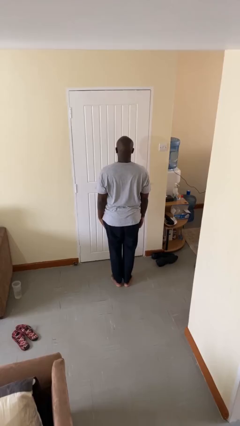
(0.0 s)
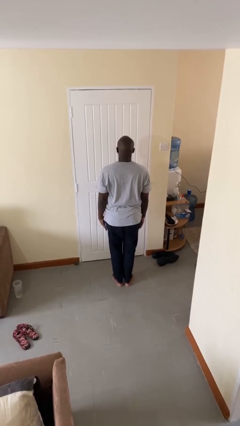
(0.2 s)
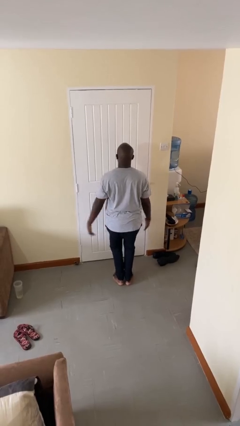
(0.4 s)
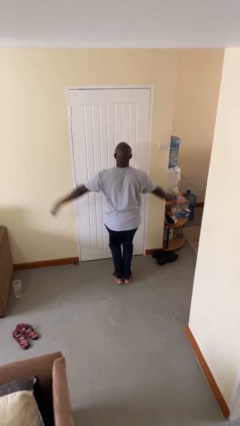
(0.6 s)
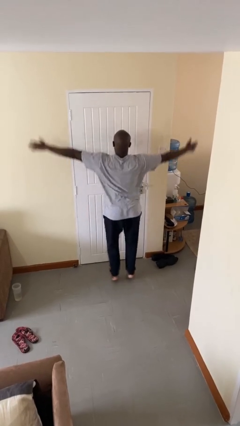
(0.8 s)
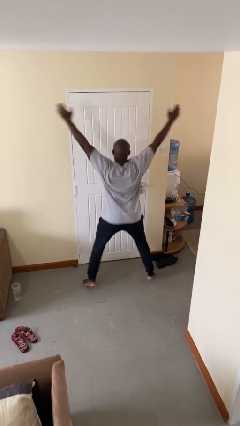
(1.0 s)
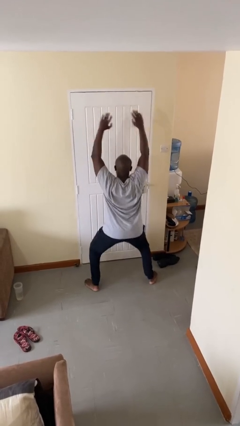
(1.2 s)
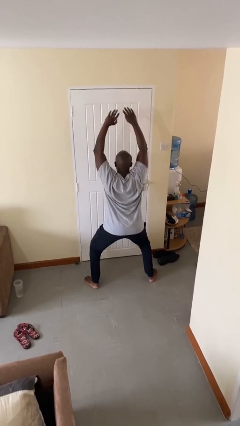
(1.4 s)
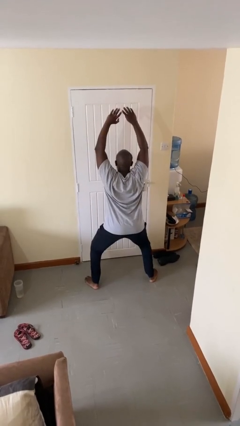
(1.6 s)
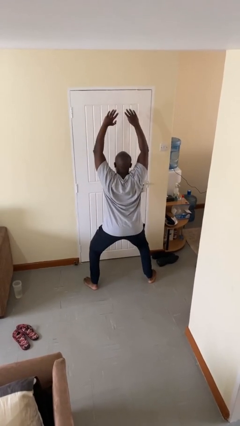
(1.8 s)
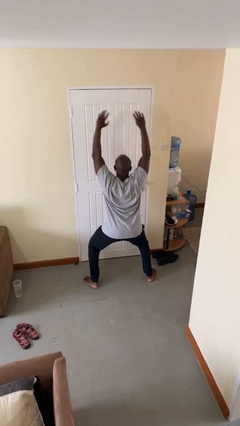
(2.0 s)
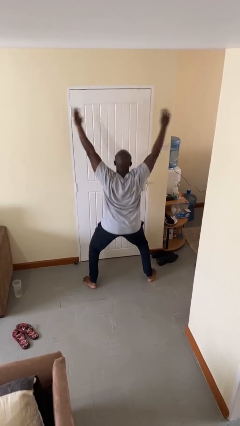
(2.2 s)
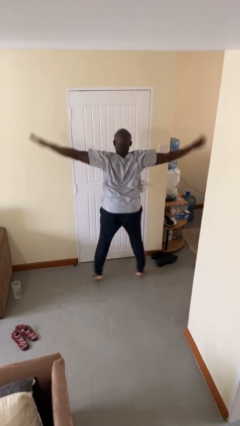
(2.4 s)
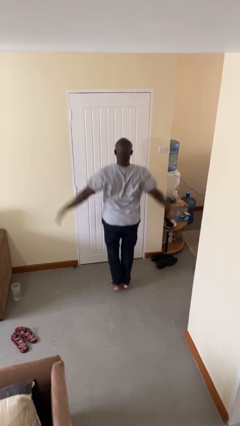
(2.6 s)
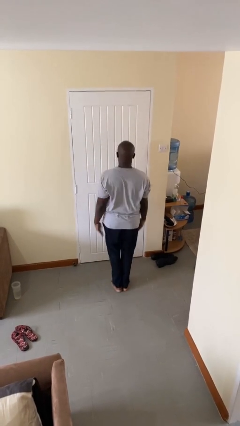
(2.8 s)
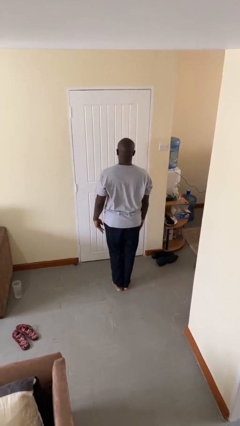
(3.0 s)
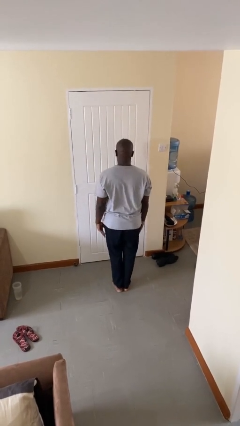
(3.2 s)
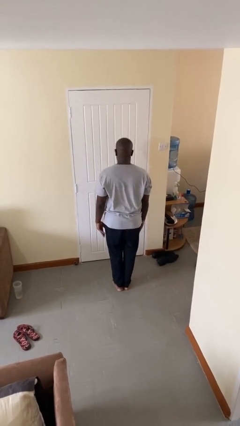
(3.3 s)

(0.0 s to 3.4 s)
person exercises with jumping jacks

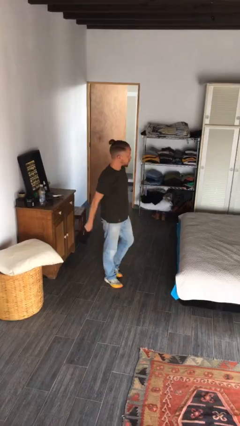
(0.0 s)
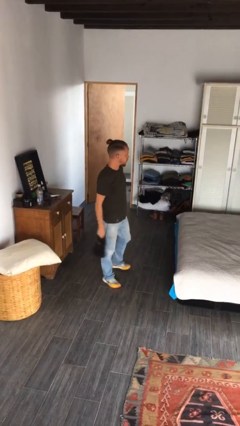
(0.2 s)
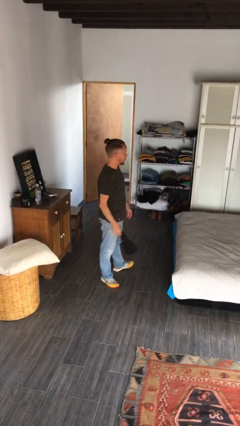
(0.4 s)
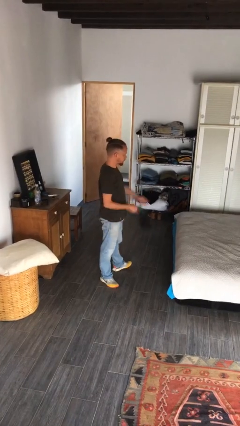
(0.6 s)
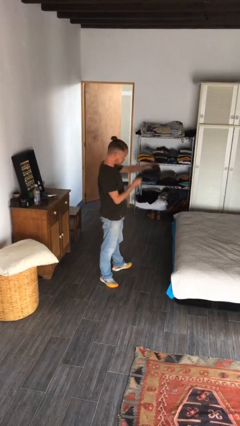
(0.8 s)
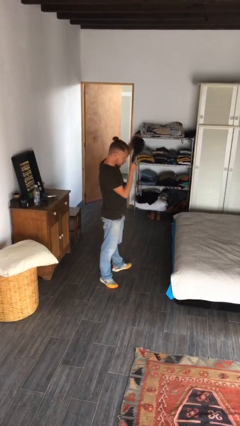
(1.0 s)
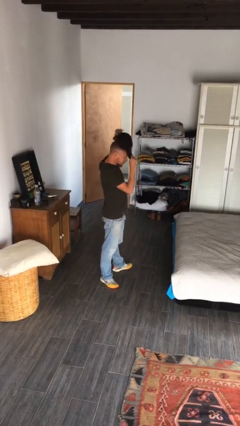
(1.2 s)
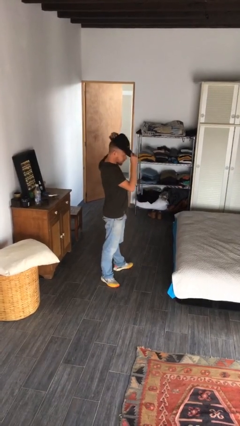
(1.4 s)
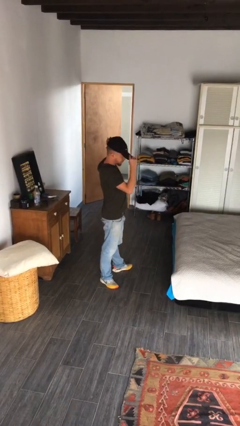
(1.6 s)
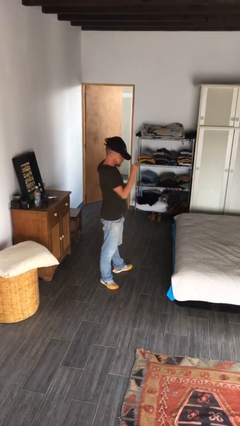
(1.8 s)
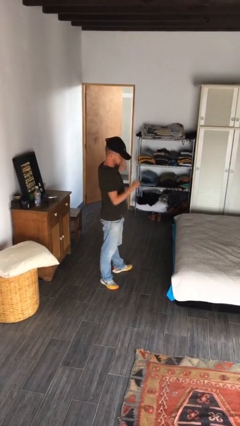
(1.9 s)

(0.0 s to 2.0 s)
person puts on hat

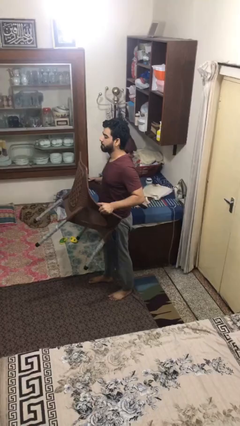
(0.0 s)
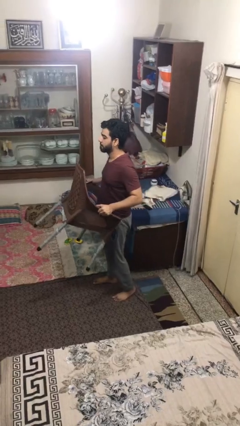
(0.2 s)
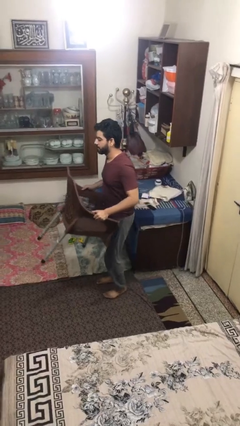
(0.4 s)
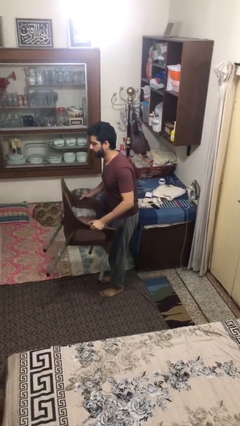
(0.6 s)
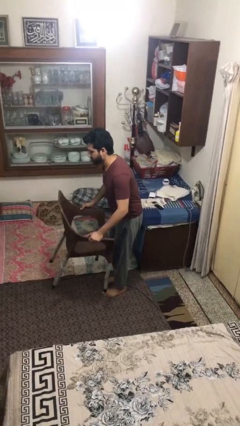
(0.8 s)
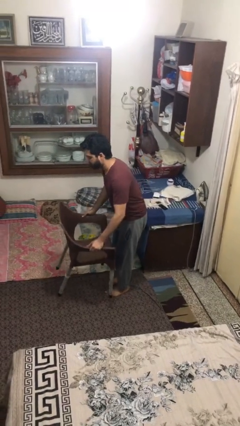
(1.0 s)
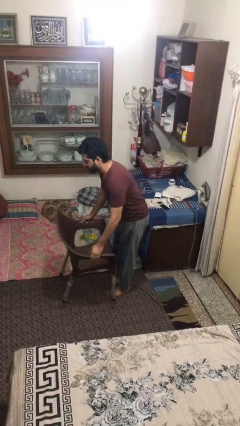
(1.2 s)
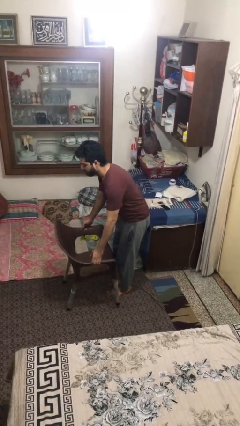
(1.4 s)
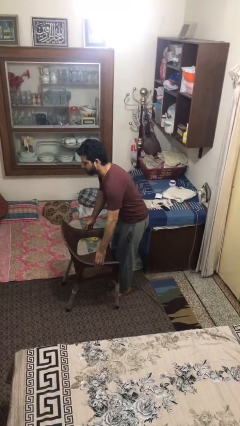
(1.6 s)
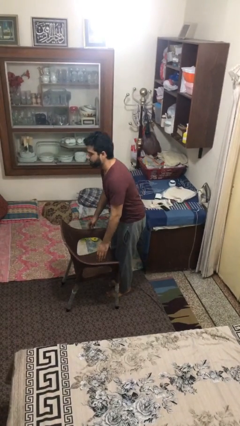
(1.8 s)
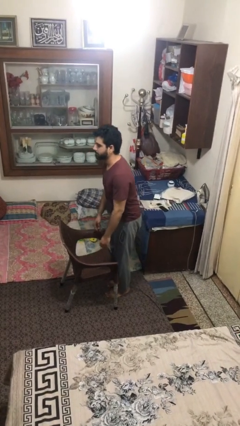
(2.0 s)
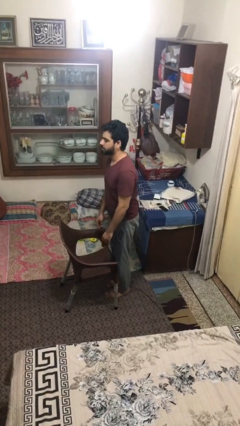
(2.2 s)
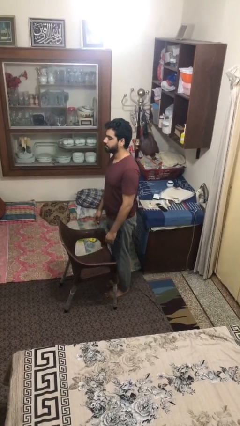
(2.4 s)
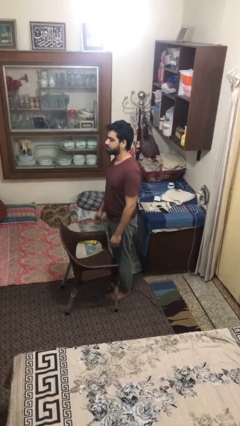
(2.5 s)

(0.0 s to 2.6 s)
person puts down object on floor

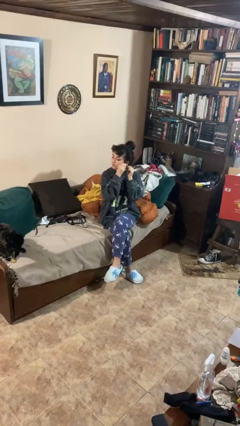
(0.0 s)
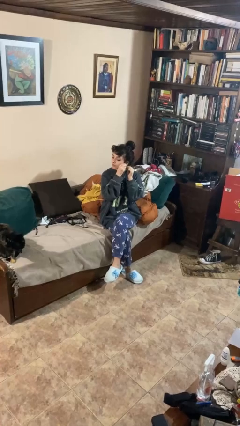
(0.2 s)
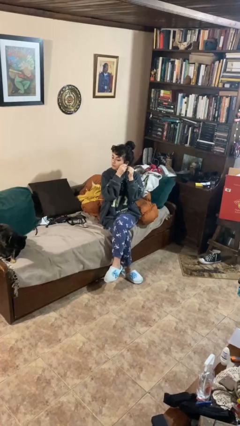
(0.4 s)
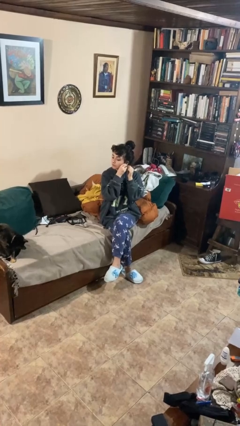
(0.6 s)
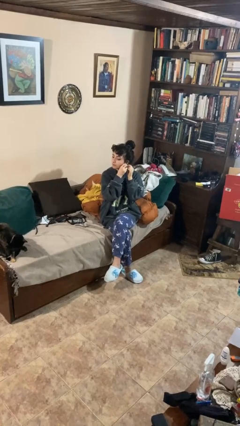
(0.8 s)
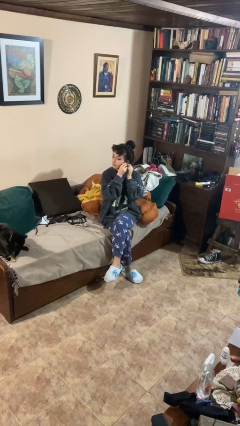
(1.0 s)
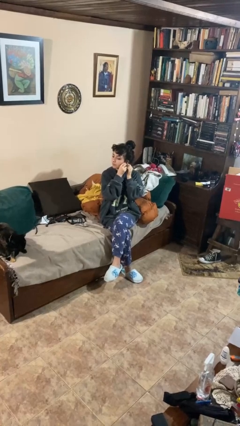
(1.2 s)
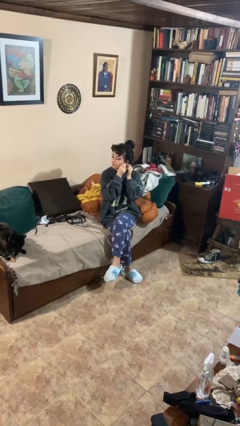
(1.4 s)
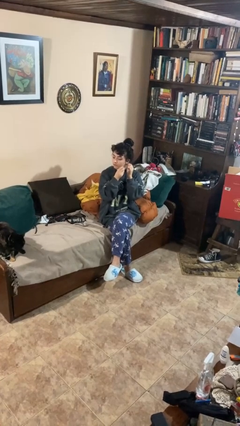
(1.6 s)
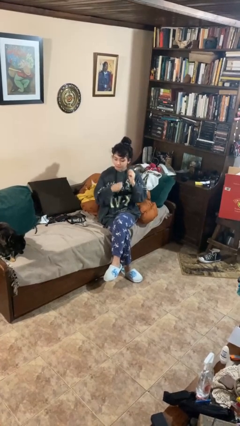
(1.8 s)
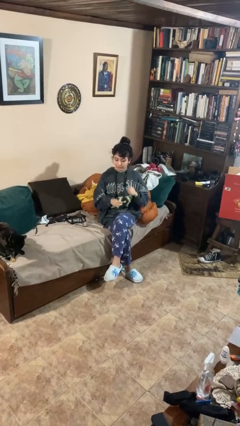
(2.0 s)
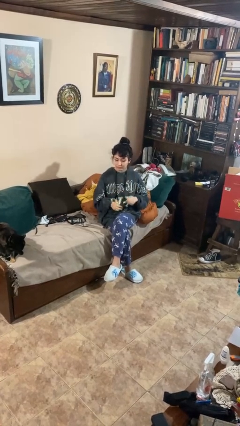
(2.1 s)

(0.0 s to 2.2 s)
person takes off earrings

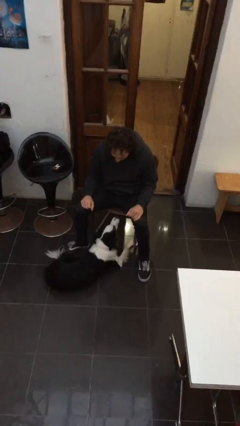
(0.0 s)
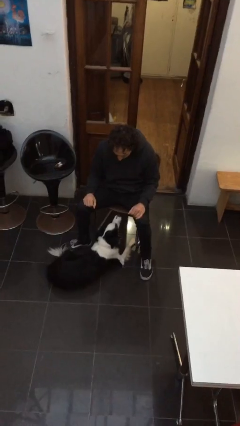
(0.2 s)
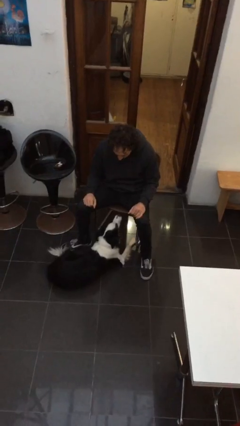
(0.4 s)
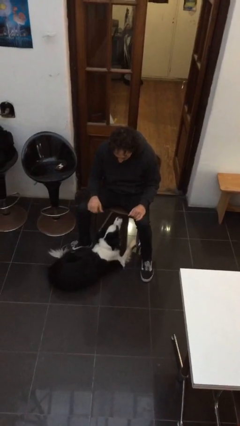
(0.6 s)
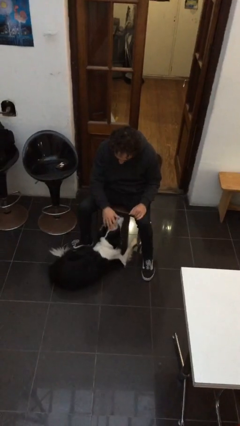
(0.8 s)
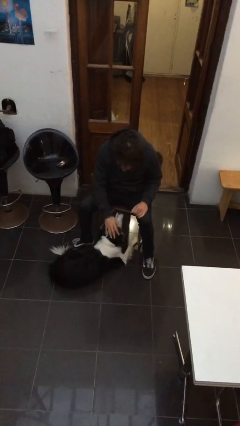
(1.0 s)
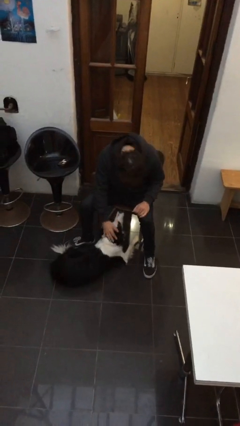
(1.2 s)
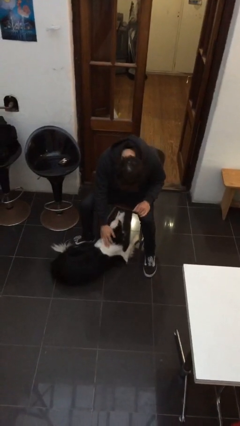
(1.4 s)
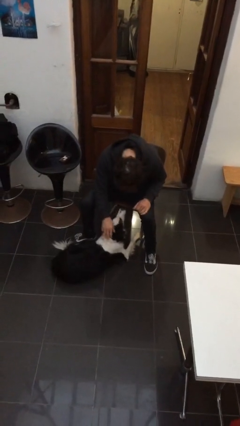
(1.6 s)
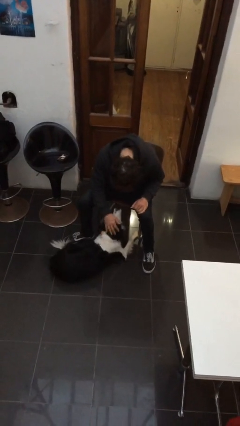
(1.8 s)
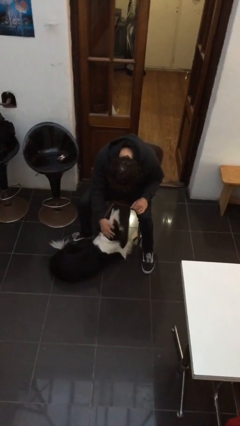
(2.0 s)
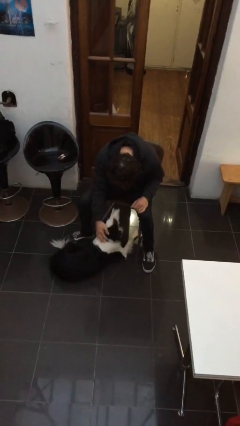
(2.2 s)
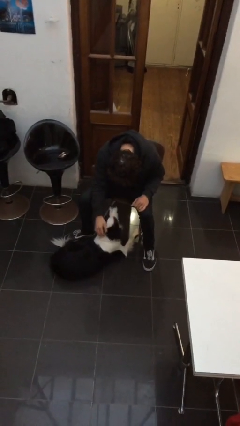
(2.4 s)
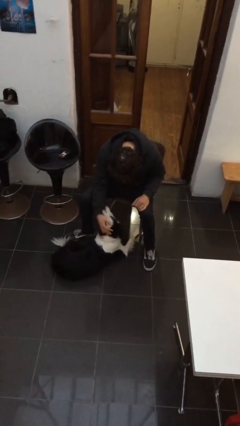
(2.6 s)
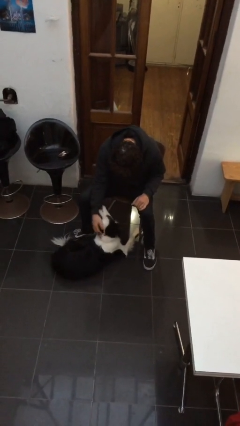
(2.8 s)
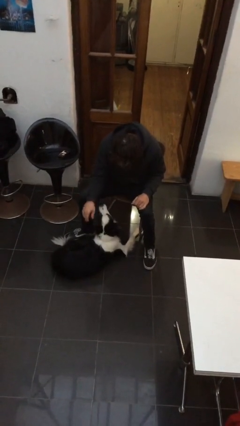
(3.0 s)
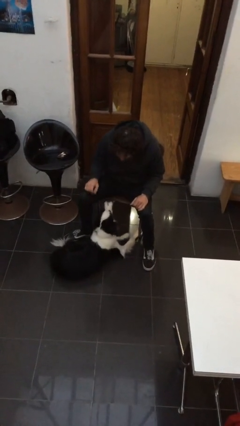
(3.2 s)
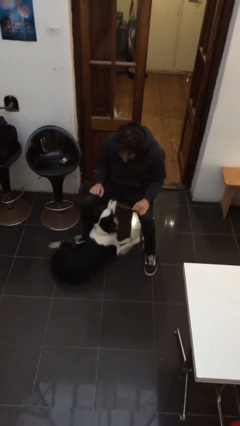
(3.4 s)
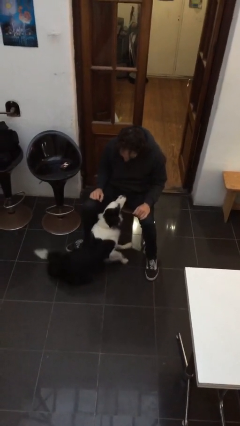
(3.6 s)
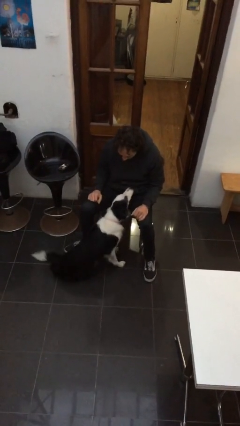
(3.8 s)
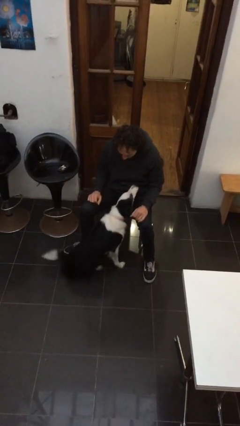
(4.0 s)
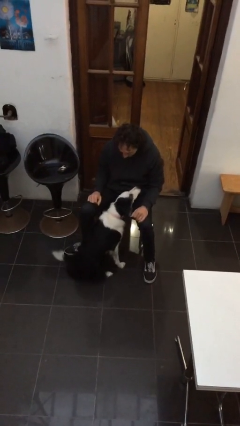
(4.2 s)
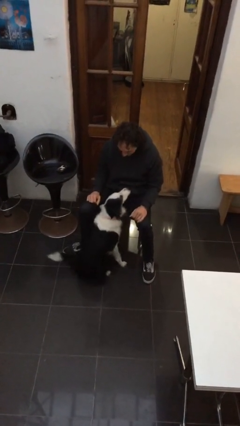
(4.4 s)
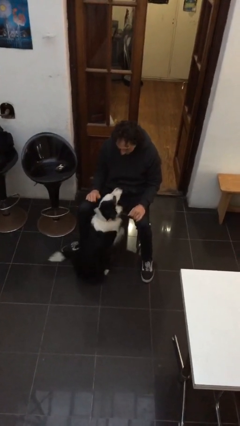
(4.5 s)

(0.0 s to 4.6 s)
person pets dog

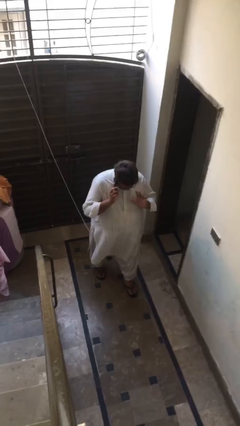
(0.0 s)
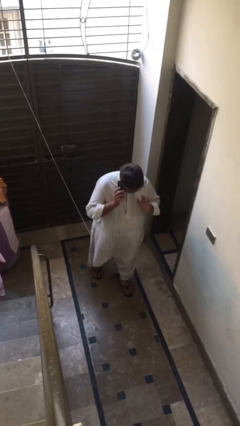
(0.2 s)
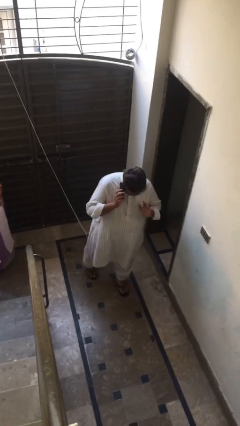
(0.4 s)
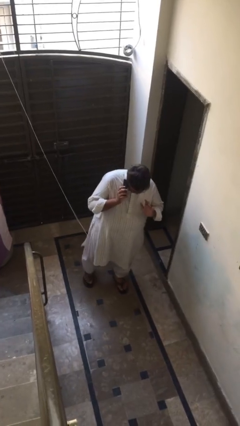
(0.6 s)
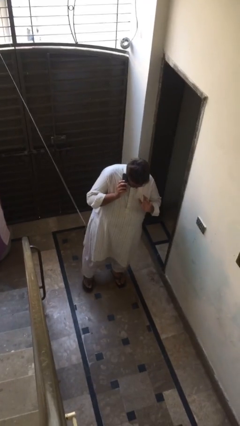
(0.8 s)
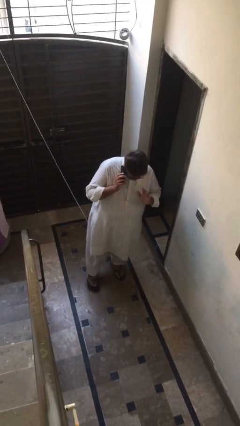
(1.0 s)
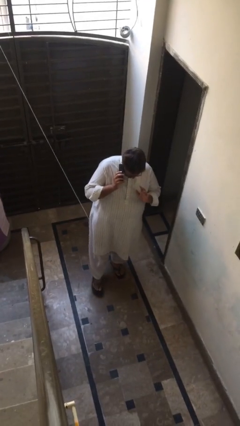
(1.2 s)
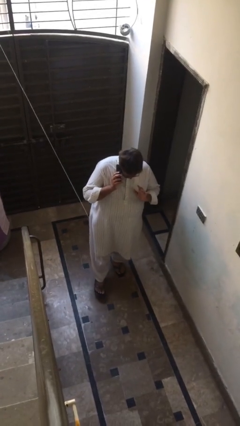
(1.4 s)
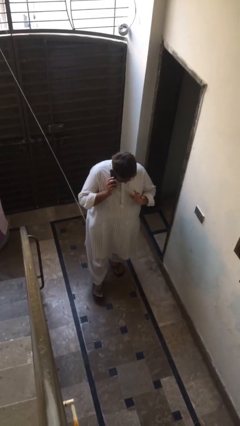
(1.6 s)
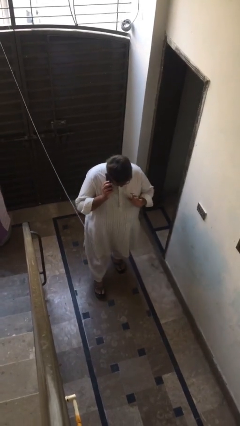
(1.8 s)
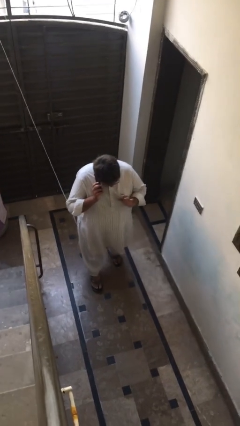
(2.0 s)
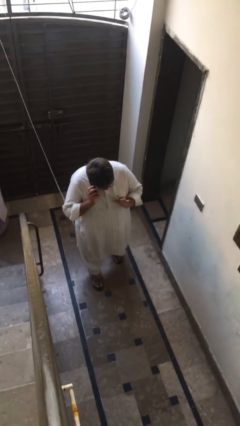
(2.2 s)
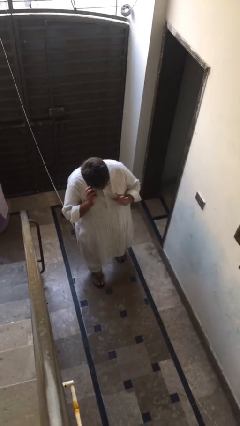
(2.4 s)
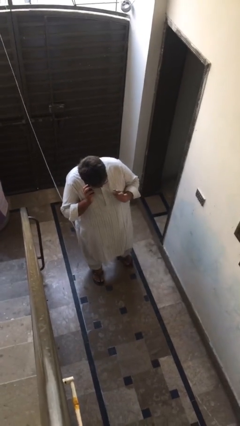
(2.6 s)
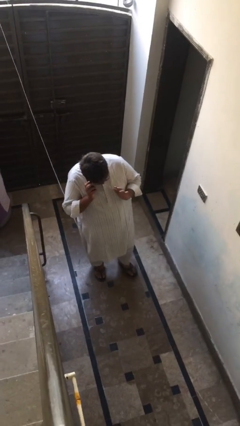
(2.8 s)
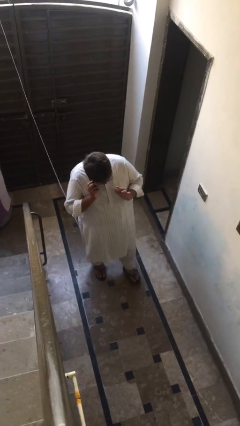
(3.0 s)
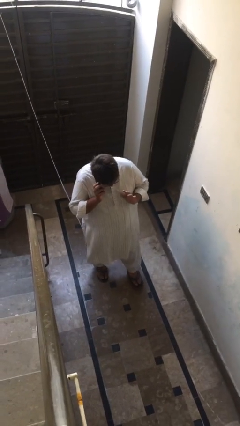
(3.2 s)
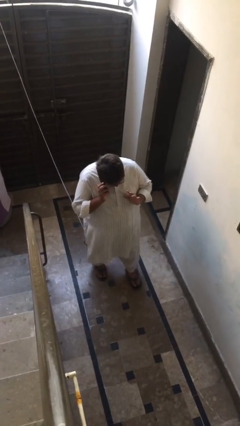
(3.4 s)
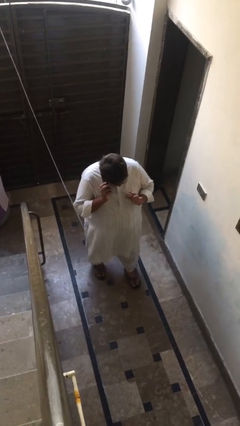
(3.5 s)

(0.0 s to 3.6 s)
person talks on phone
